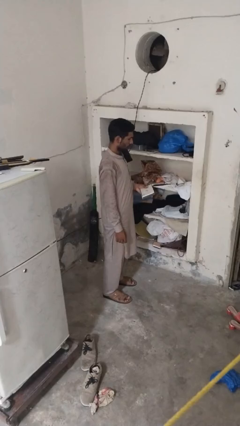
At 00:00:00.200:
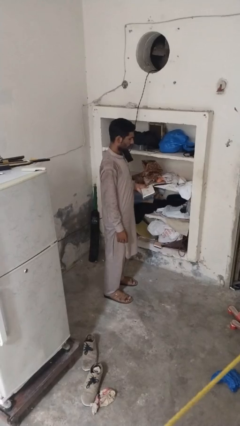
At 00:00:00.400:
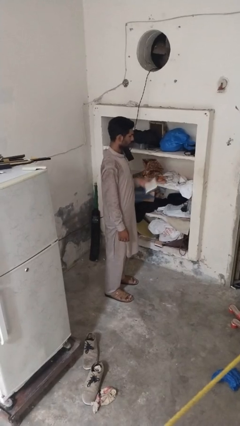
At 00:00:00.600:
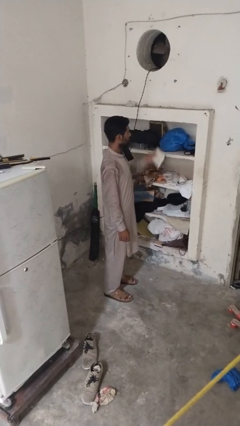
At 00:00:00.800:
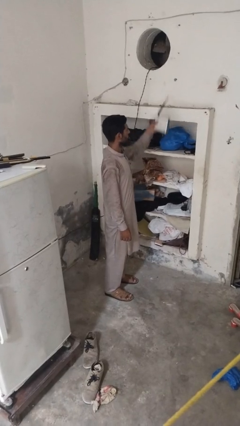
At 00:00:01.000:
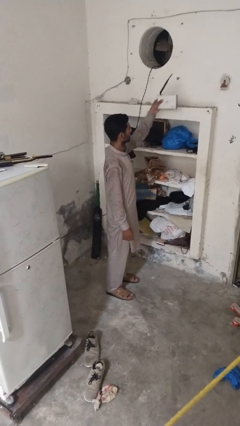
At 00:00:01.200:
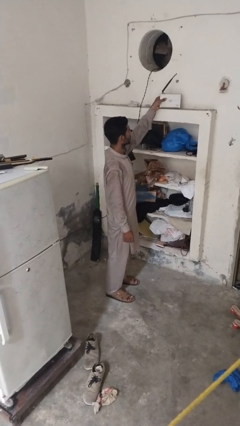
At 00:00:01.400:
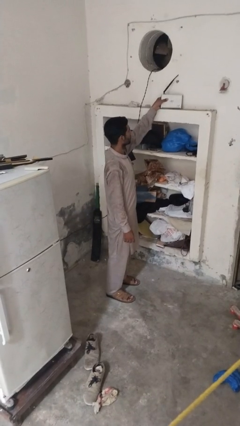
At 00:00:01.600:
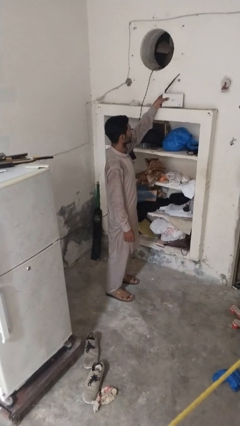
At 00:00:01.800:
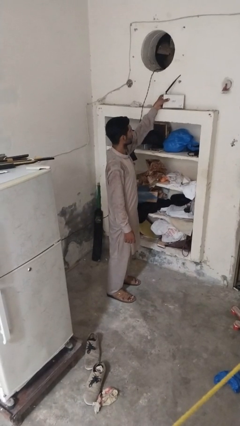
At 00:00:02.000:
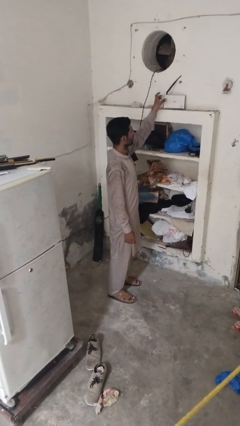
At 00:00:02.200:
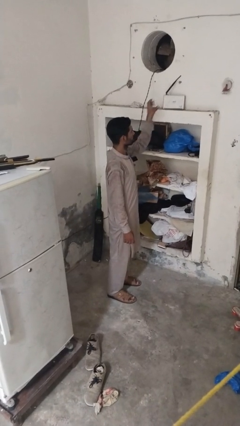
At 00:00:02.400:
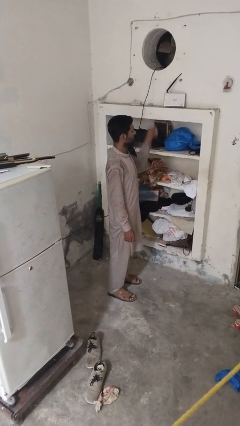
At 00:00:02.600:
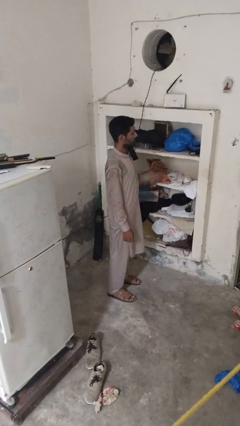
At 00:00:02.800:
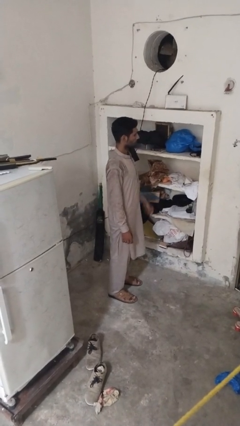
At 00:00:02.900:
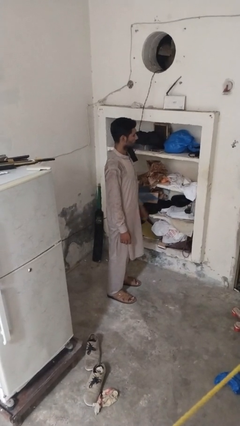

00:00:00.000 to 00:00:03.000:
person puts down object on shelf

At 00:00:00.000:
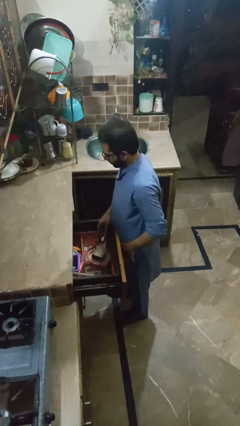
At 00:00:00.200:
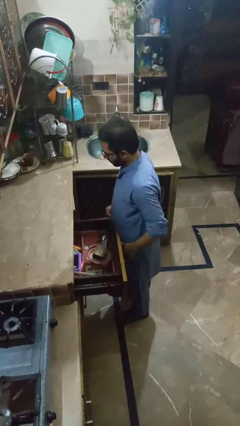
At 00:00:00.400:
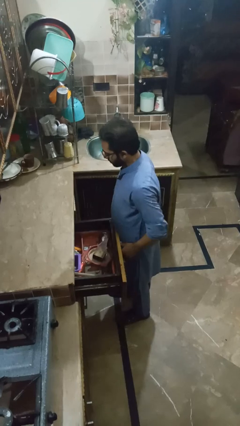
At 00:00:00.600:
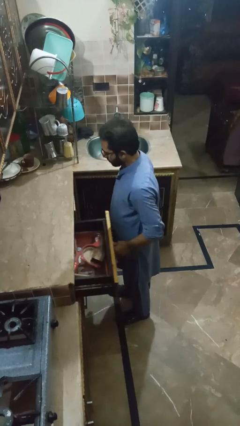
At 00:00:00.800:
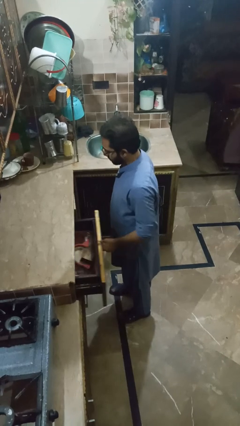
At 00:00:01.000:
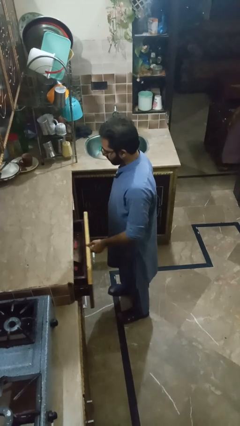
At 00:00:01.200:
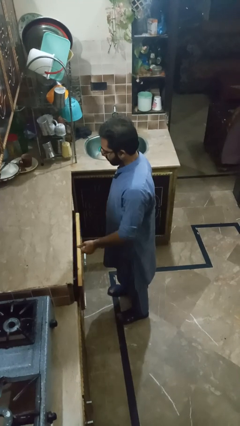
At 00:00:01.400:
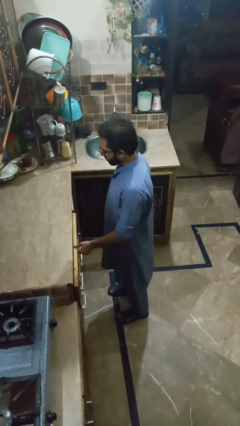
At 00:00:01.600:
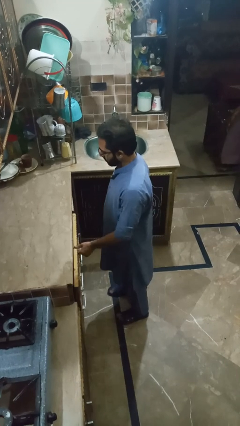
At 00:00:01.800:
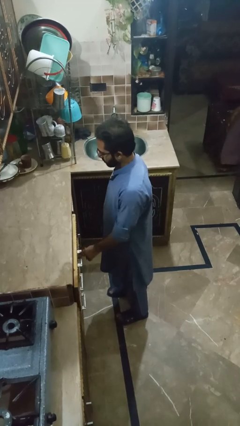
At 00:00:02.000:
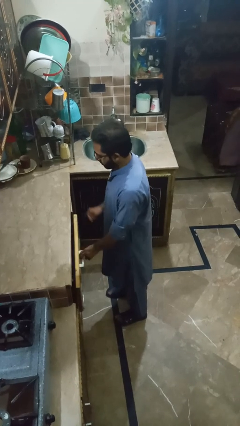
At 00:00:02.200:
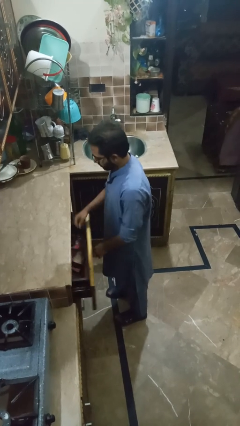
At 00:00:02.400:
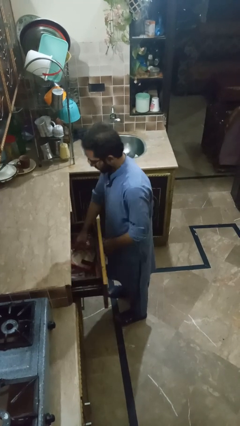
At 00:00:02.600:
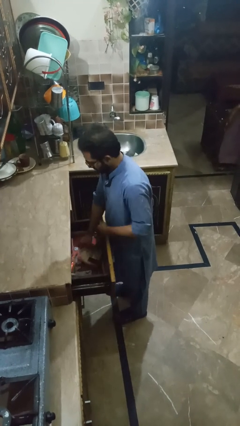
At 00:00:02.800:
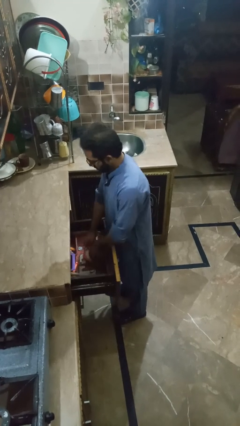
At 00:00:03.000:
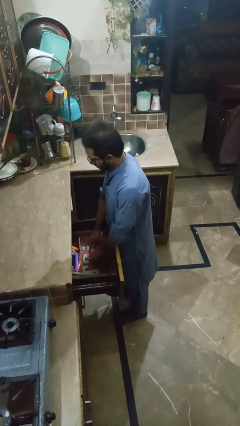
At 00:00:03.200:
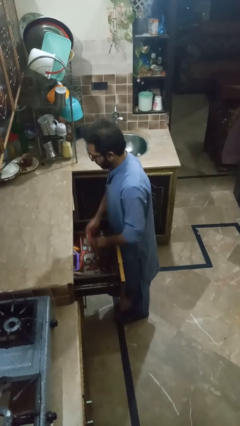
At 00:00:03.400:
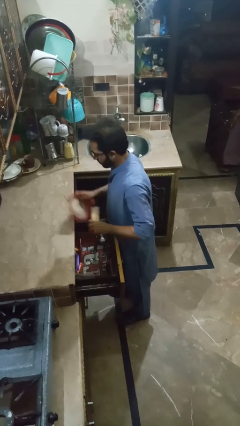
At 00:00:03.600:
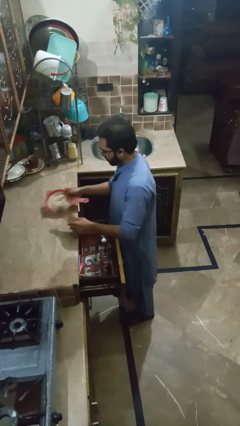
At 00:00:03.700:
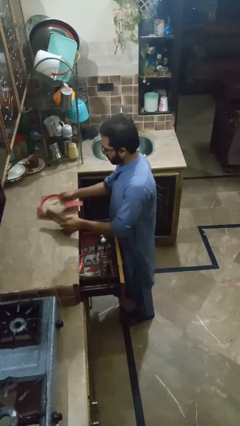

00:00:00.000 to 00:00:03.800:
person puts object into kitchen drawer

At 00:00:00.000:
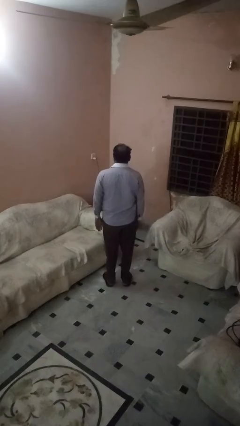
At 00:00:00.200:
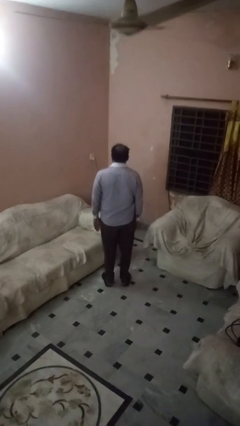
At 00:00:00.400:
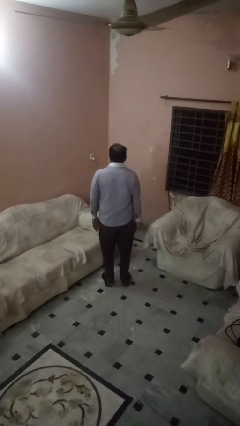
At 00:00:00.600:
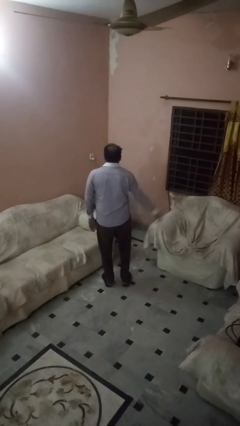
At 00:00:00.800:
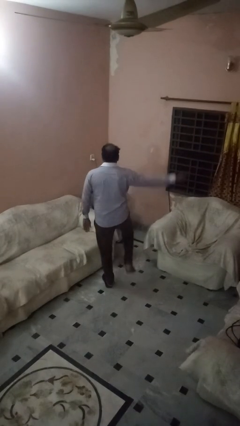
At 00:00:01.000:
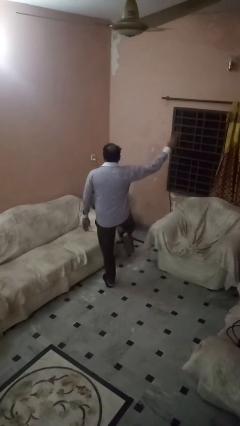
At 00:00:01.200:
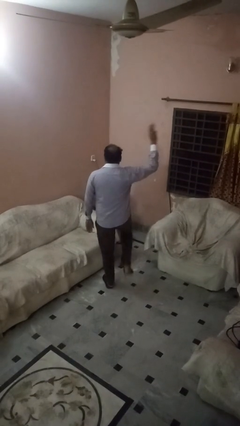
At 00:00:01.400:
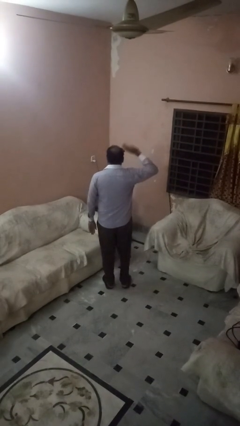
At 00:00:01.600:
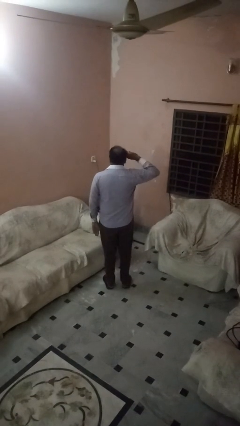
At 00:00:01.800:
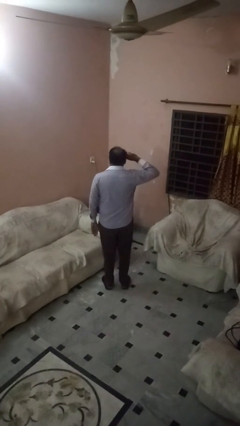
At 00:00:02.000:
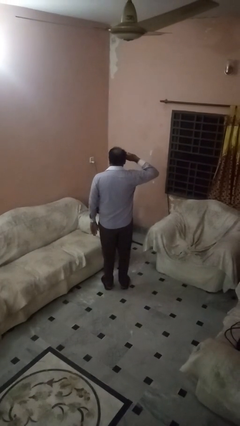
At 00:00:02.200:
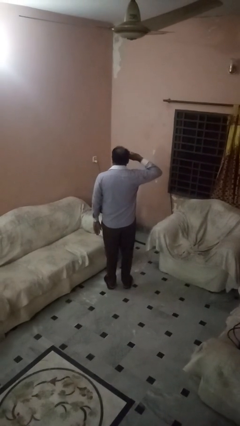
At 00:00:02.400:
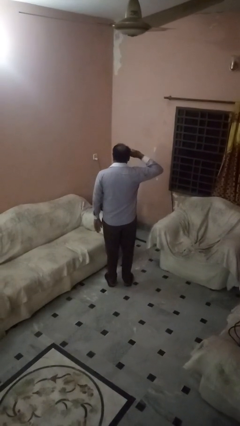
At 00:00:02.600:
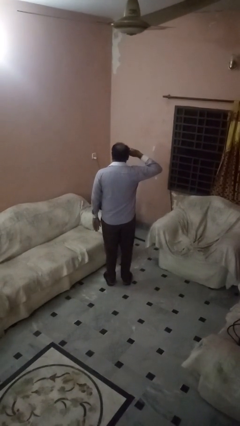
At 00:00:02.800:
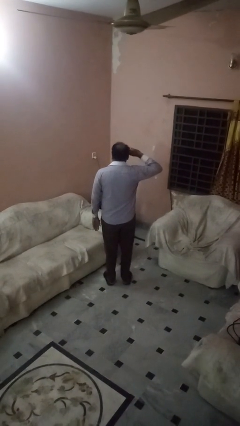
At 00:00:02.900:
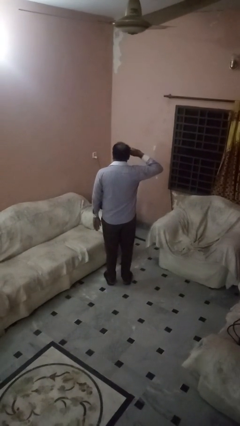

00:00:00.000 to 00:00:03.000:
person salutes

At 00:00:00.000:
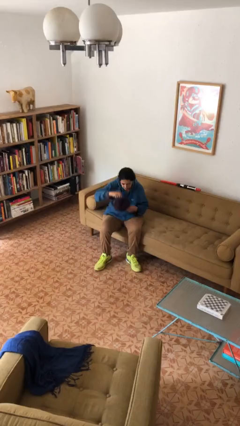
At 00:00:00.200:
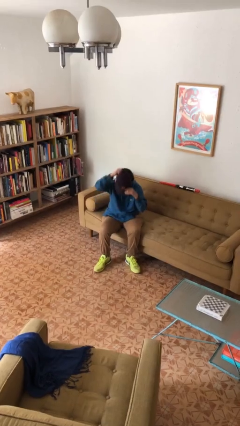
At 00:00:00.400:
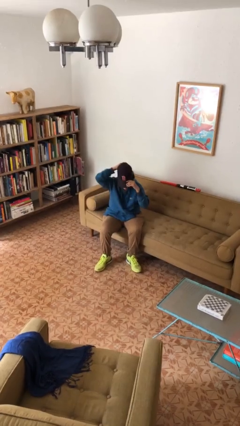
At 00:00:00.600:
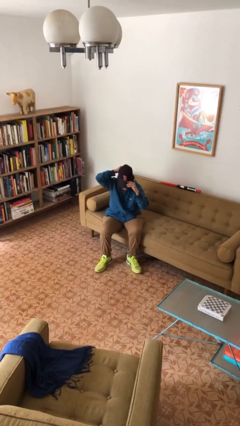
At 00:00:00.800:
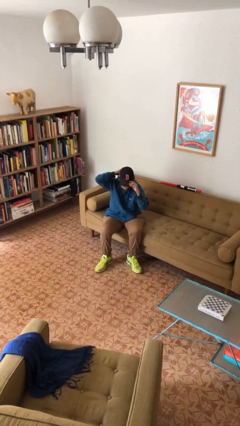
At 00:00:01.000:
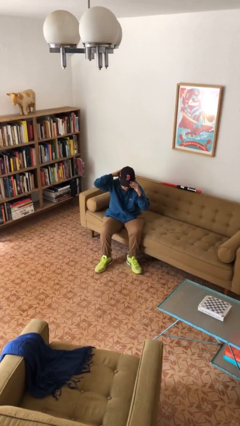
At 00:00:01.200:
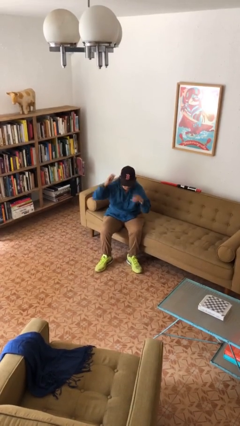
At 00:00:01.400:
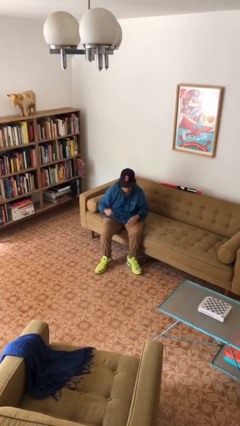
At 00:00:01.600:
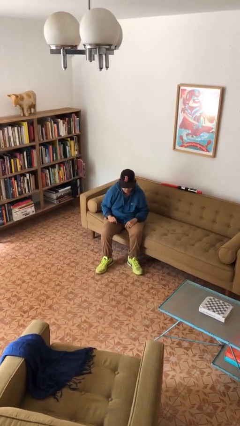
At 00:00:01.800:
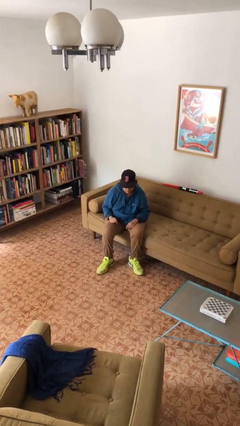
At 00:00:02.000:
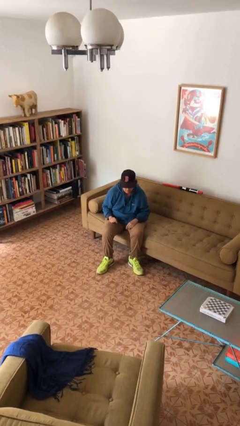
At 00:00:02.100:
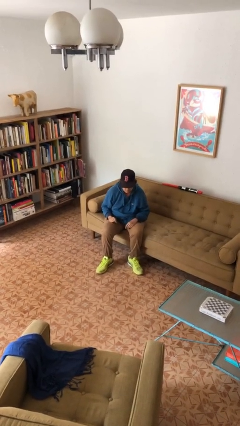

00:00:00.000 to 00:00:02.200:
person puts on hat

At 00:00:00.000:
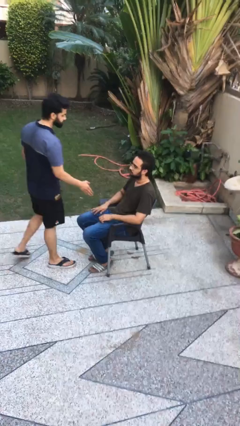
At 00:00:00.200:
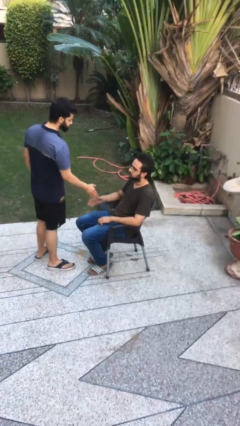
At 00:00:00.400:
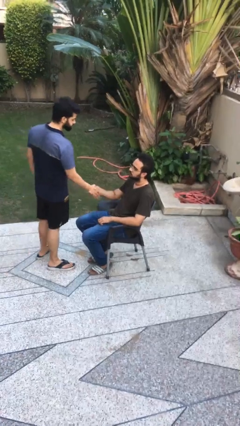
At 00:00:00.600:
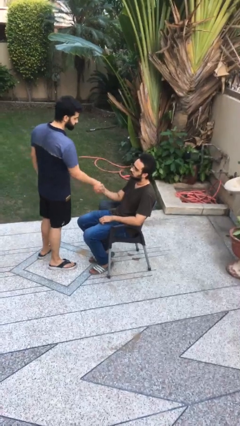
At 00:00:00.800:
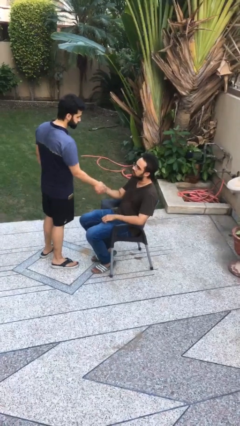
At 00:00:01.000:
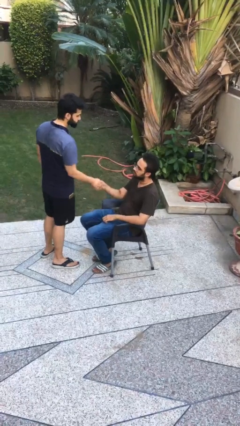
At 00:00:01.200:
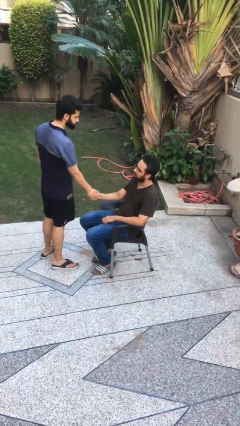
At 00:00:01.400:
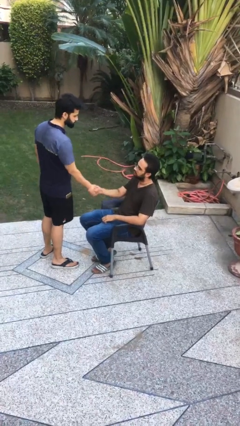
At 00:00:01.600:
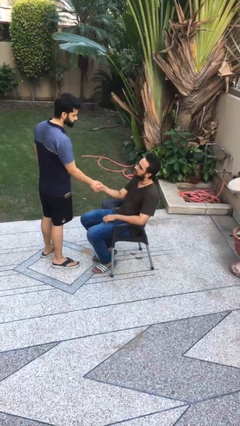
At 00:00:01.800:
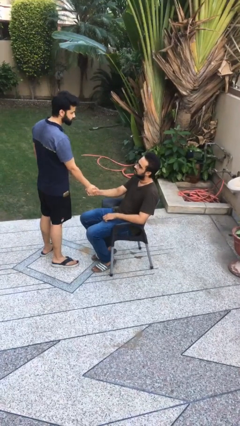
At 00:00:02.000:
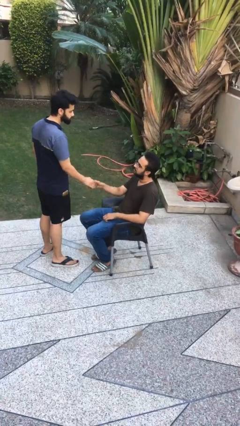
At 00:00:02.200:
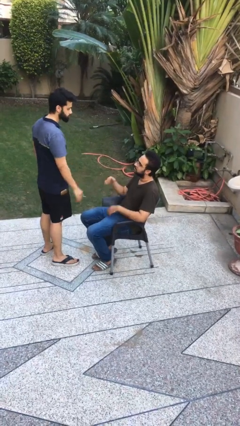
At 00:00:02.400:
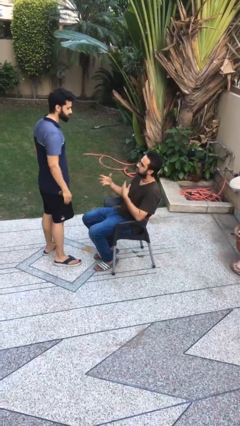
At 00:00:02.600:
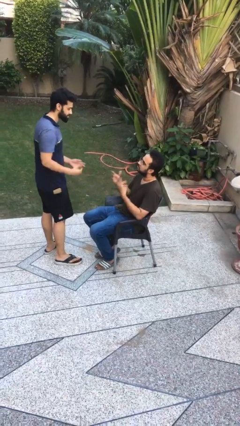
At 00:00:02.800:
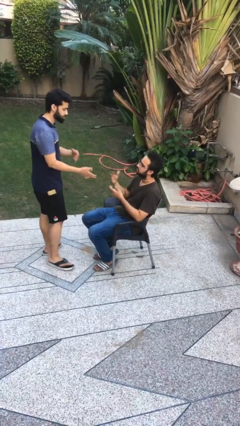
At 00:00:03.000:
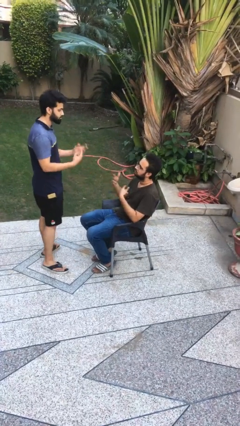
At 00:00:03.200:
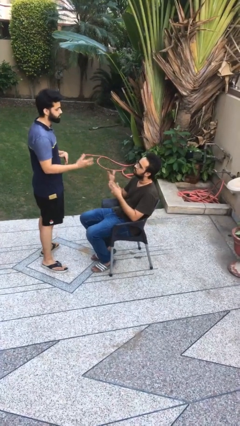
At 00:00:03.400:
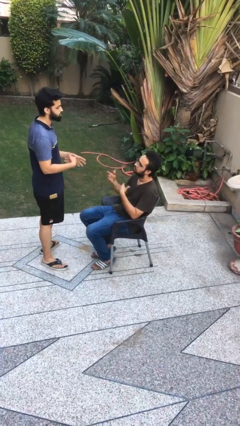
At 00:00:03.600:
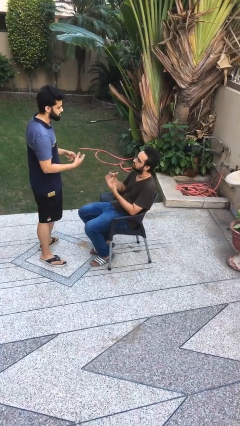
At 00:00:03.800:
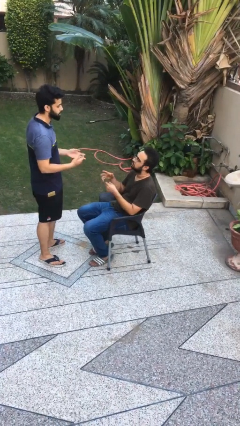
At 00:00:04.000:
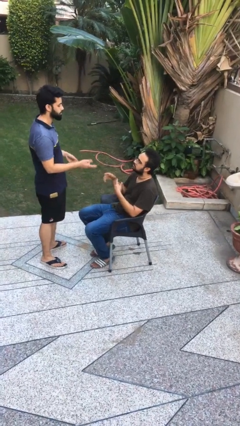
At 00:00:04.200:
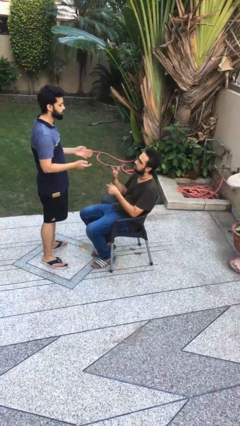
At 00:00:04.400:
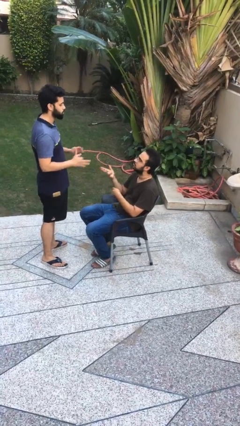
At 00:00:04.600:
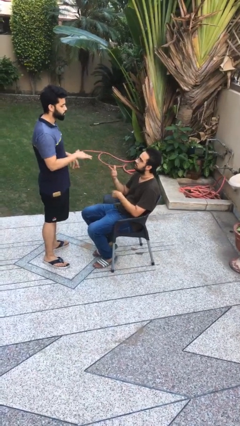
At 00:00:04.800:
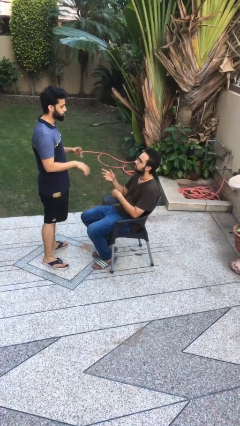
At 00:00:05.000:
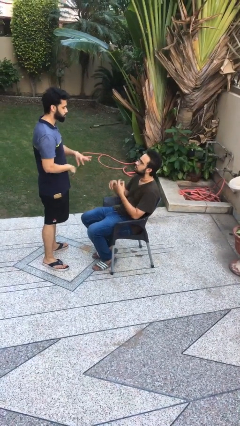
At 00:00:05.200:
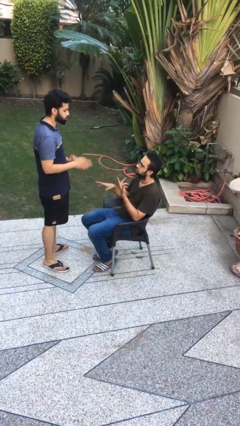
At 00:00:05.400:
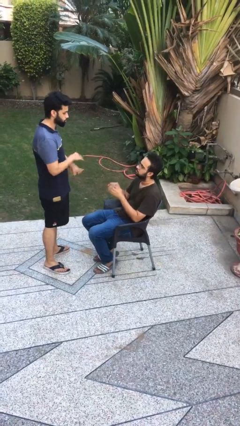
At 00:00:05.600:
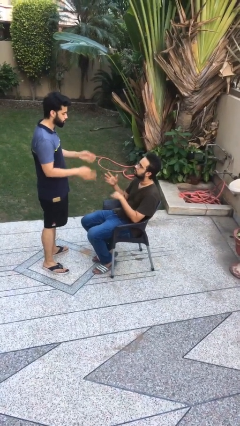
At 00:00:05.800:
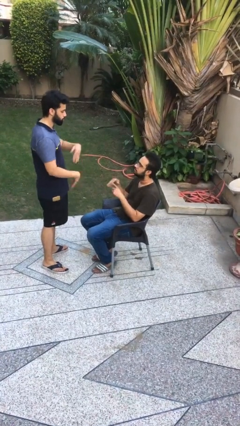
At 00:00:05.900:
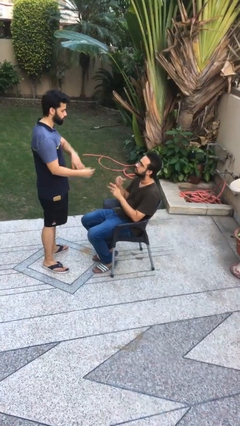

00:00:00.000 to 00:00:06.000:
person shakes hand
